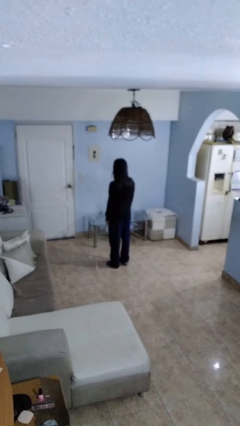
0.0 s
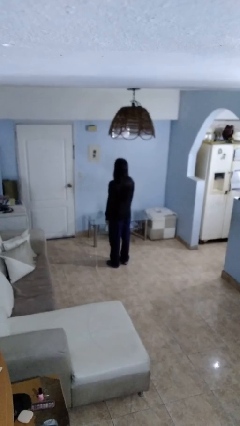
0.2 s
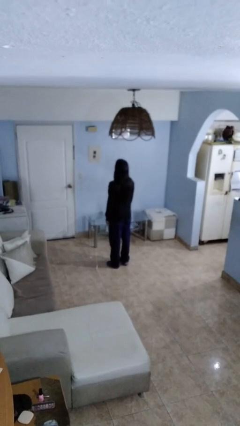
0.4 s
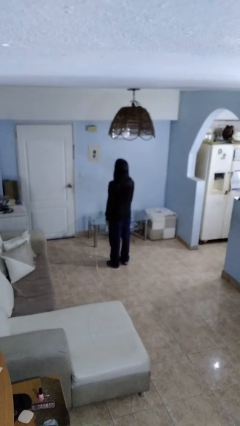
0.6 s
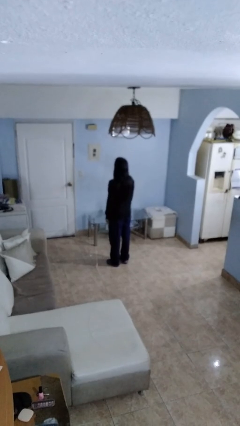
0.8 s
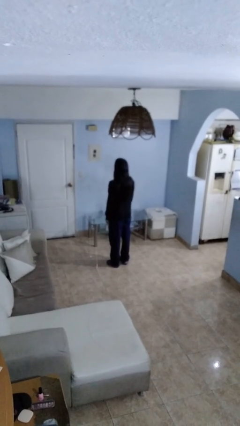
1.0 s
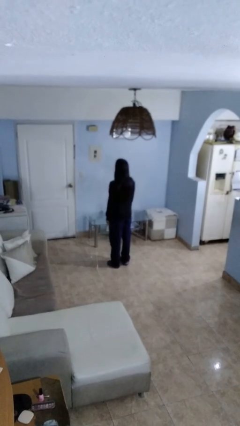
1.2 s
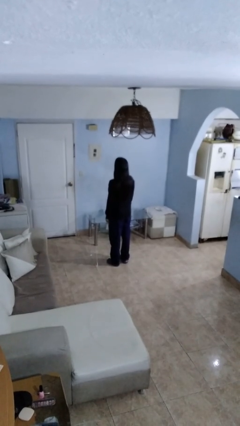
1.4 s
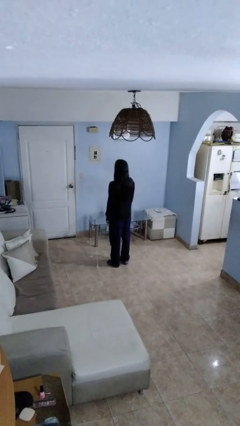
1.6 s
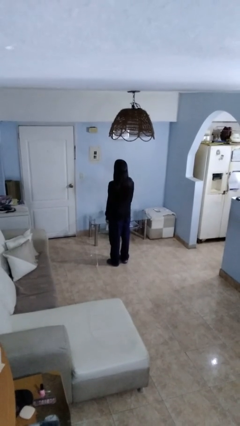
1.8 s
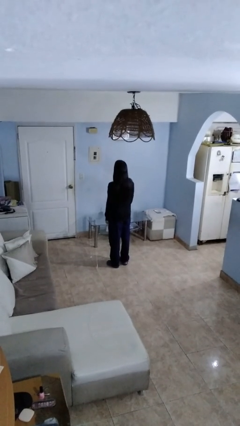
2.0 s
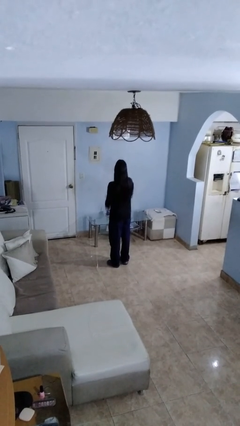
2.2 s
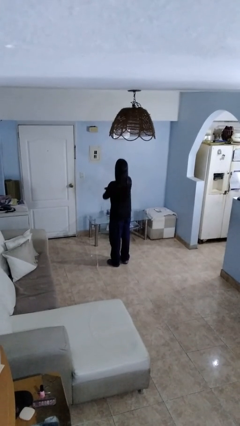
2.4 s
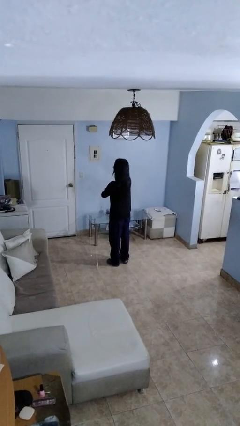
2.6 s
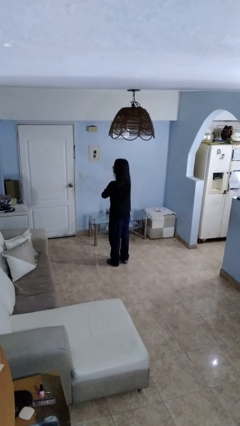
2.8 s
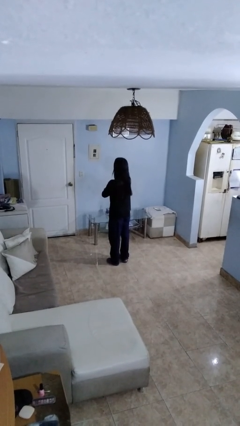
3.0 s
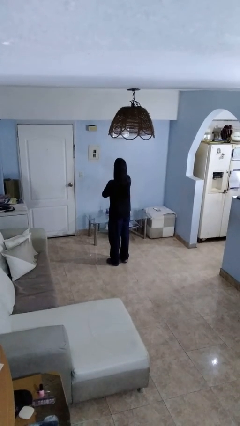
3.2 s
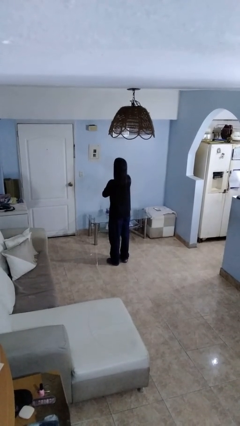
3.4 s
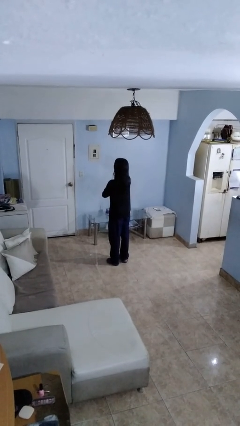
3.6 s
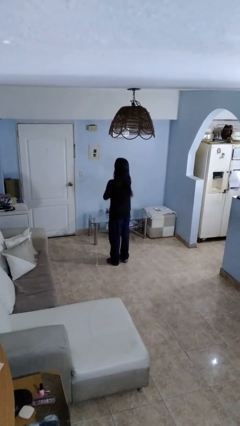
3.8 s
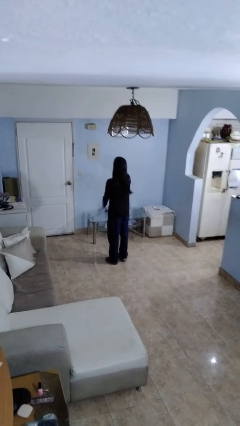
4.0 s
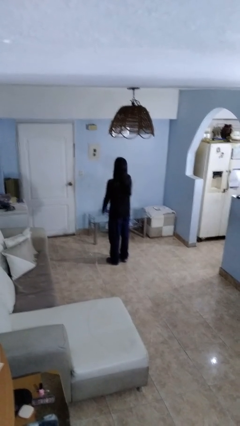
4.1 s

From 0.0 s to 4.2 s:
person shakes head

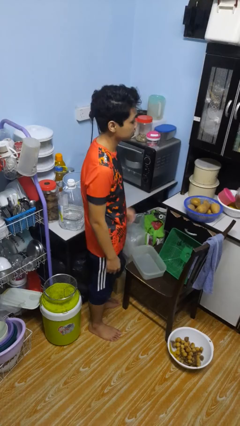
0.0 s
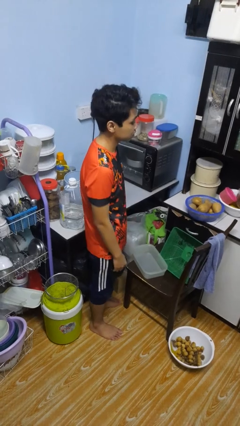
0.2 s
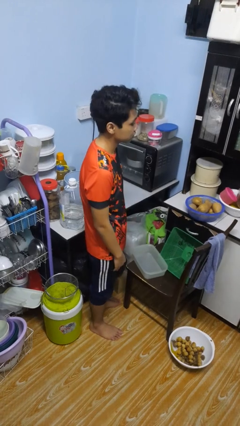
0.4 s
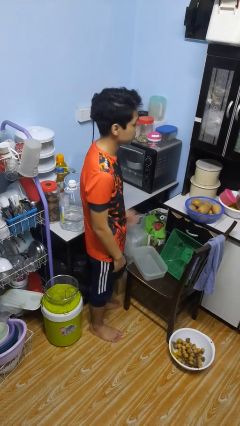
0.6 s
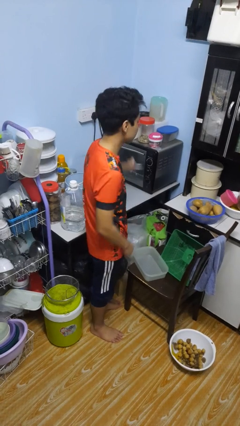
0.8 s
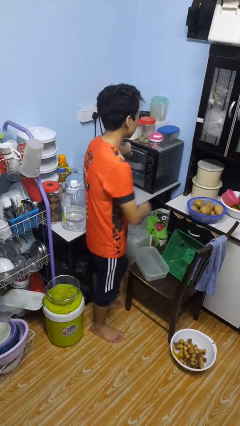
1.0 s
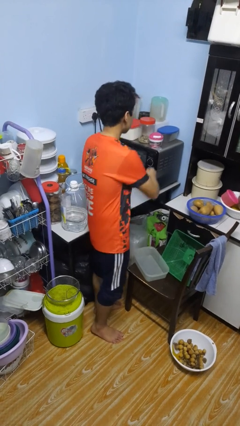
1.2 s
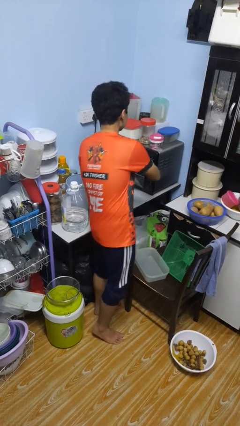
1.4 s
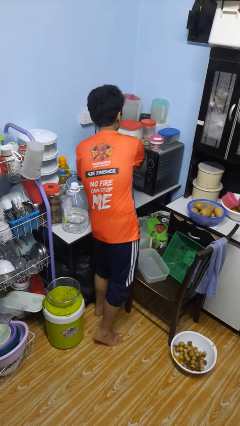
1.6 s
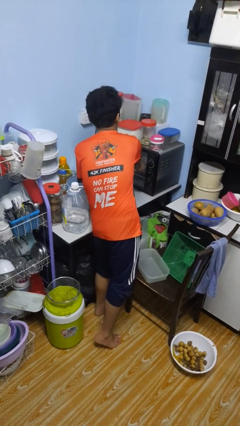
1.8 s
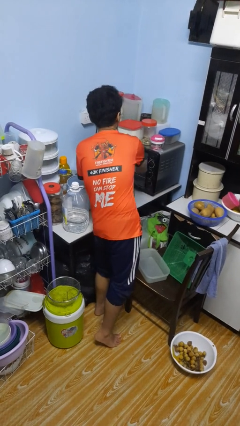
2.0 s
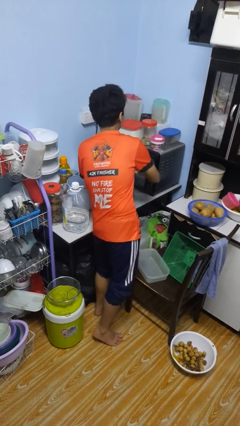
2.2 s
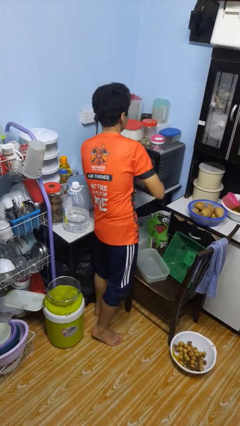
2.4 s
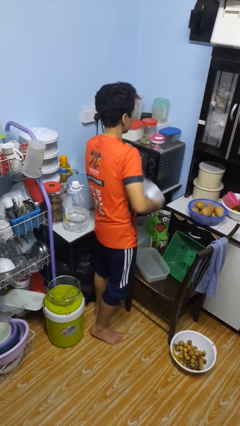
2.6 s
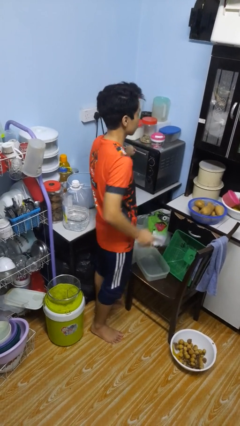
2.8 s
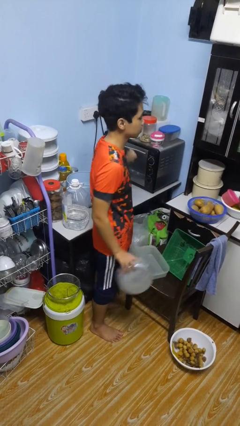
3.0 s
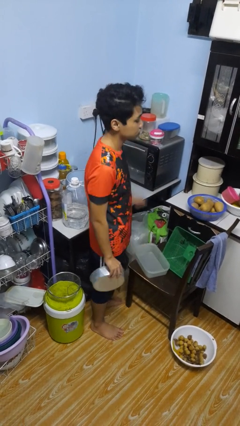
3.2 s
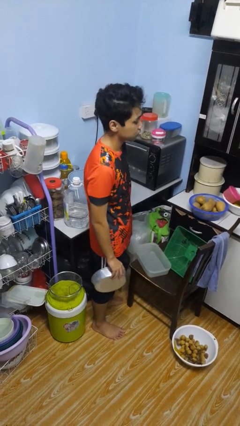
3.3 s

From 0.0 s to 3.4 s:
person takes object from oven

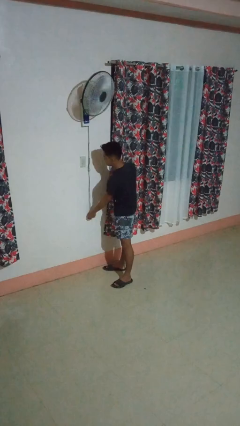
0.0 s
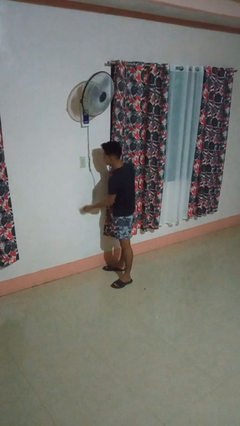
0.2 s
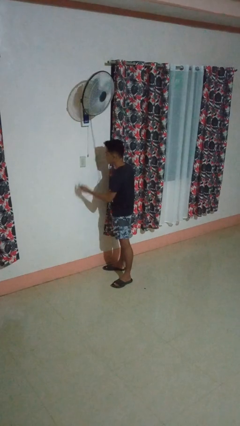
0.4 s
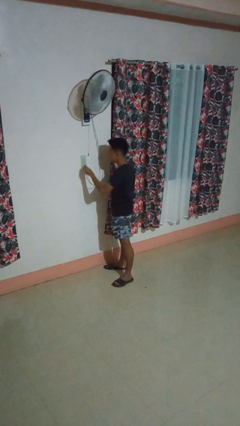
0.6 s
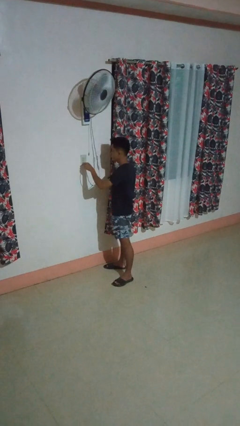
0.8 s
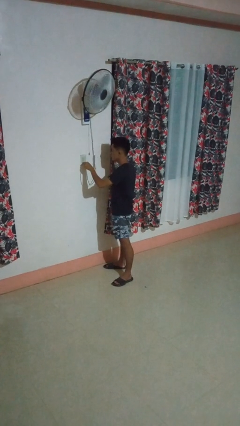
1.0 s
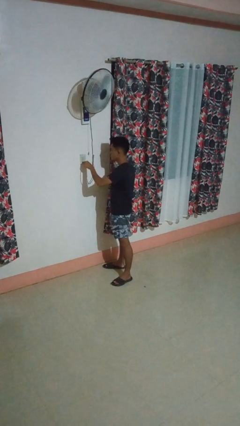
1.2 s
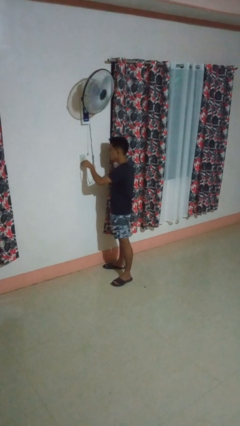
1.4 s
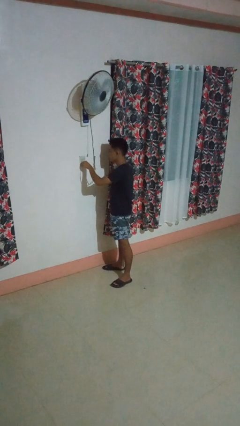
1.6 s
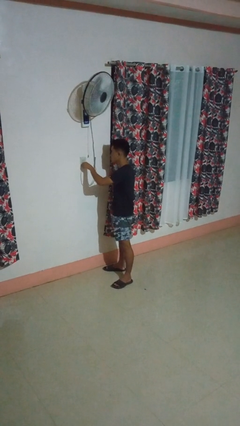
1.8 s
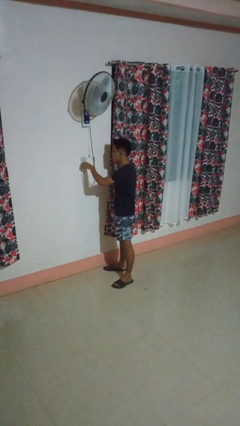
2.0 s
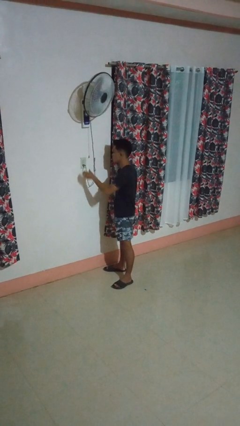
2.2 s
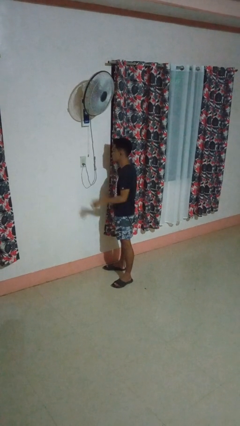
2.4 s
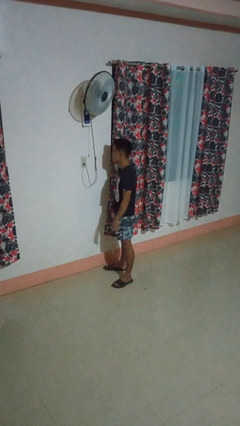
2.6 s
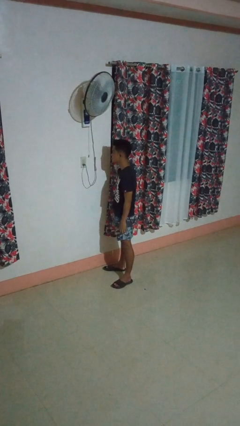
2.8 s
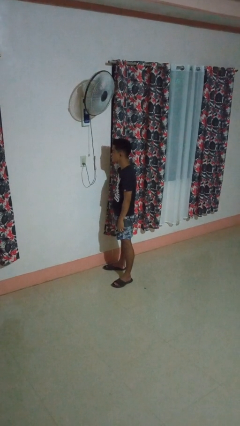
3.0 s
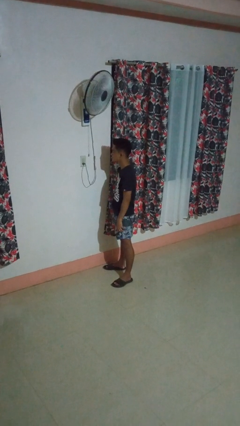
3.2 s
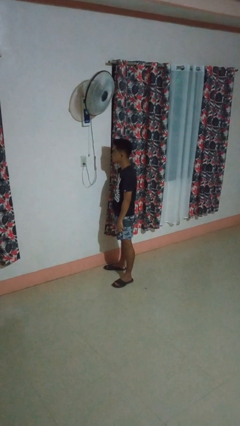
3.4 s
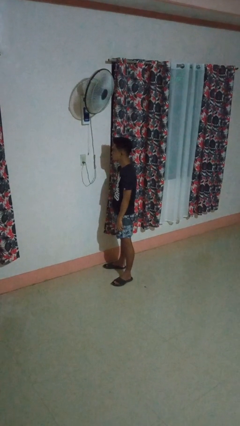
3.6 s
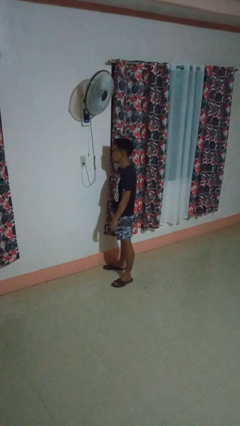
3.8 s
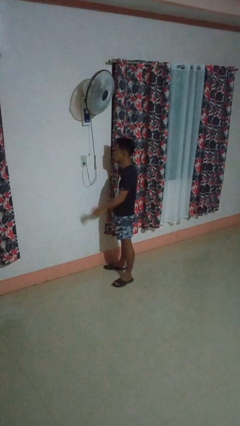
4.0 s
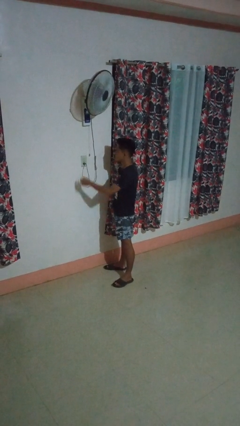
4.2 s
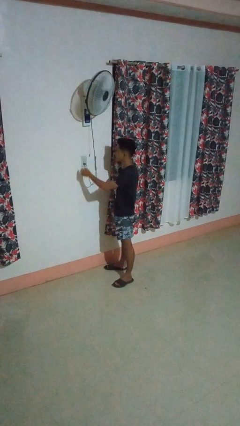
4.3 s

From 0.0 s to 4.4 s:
person plugs into electrical socket

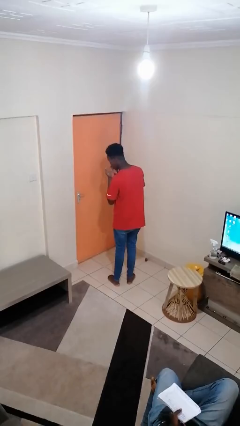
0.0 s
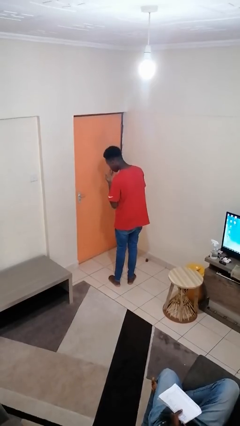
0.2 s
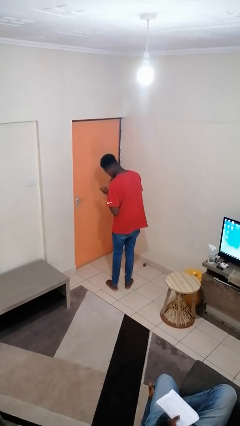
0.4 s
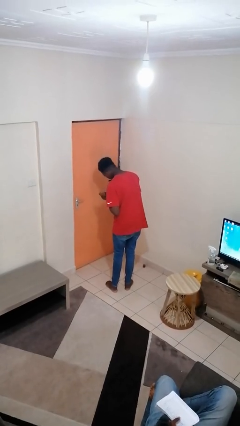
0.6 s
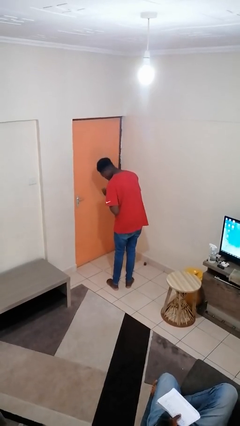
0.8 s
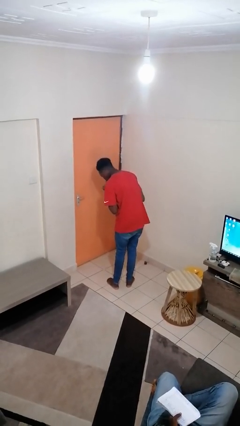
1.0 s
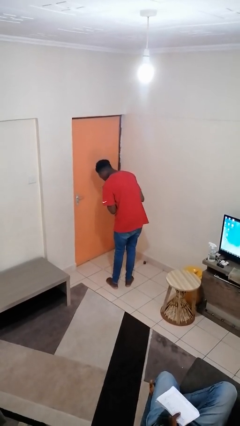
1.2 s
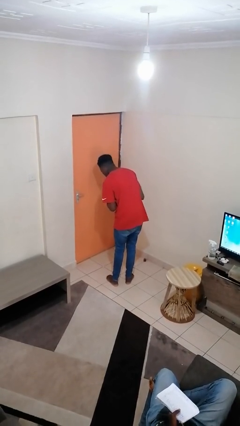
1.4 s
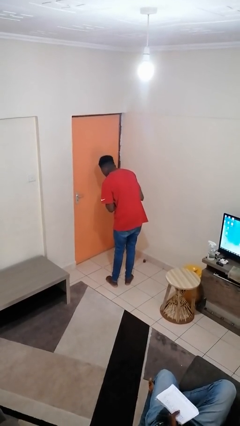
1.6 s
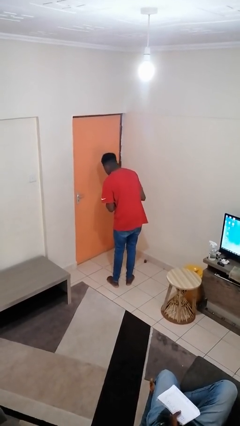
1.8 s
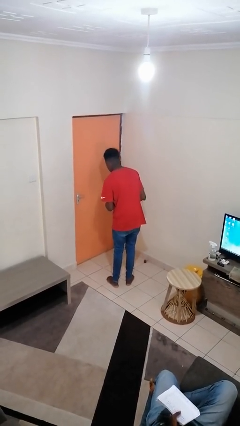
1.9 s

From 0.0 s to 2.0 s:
person licks fingers

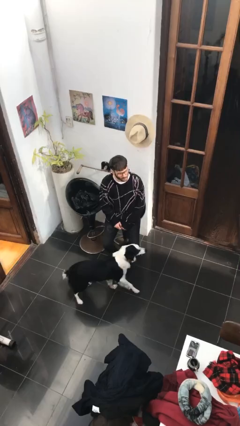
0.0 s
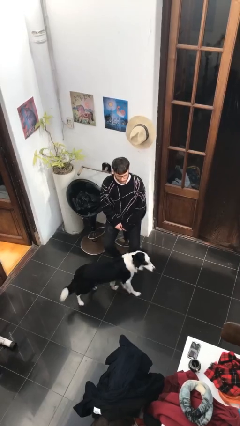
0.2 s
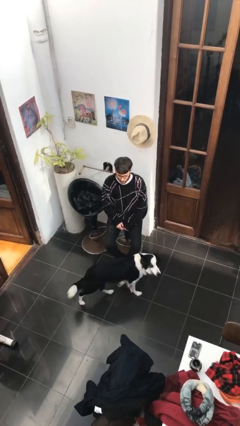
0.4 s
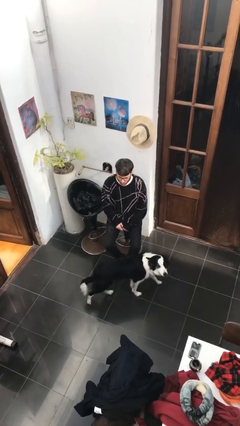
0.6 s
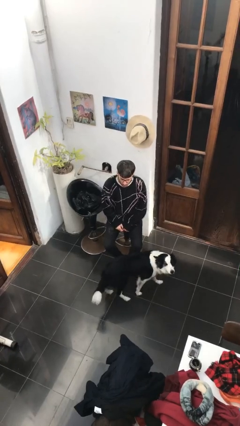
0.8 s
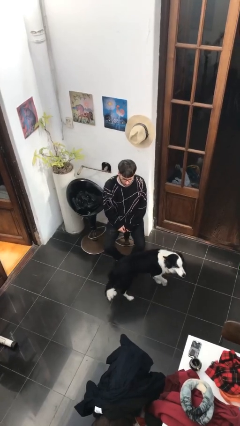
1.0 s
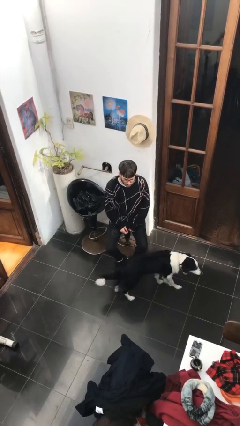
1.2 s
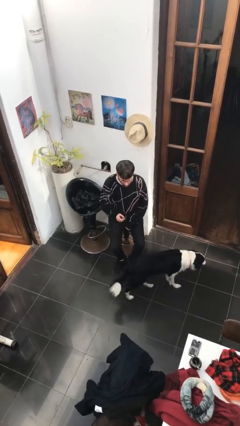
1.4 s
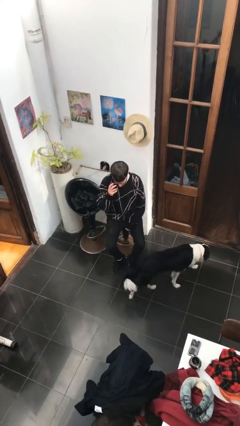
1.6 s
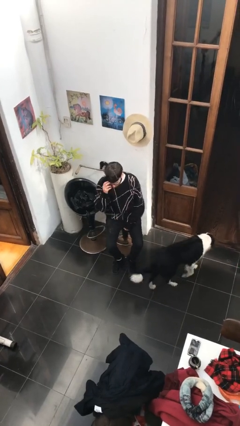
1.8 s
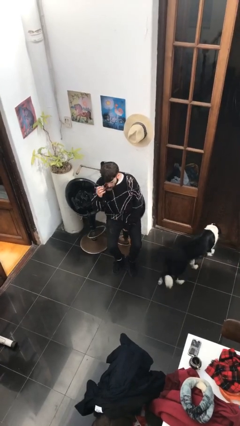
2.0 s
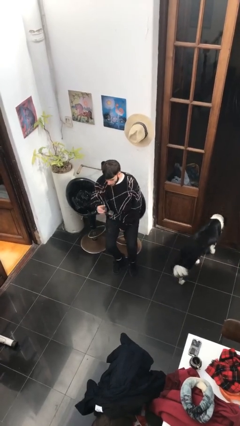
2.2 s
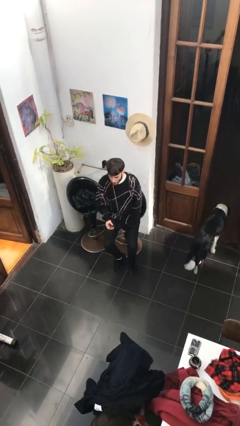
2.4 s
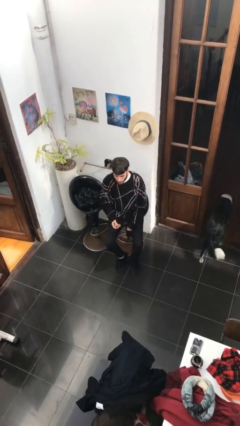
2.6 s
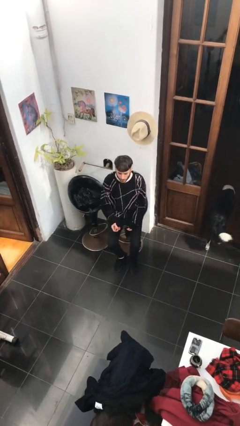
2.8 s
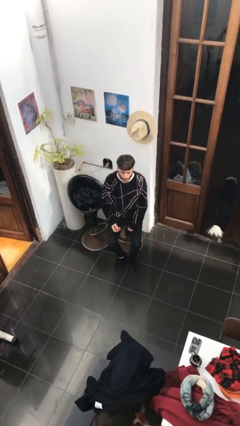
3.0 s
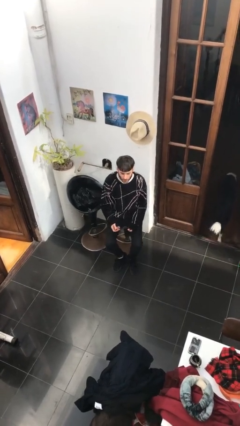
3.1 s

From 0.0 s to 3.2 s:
person takes off glasses
